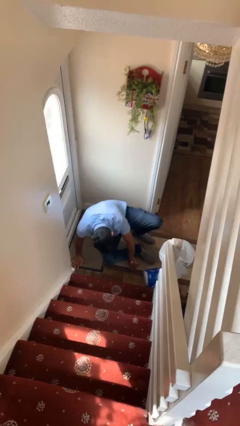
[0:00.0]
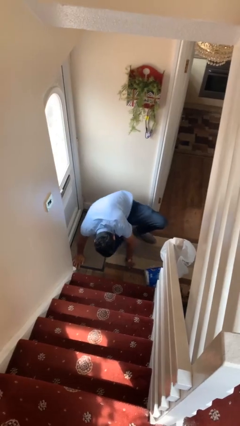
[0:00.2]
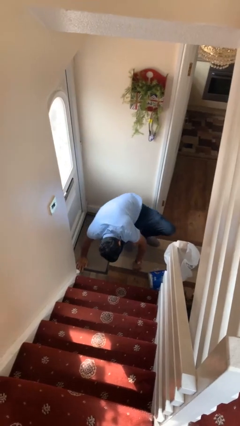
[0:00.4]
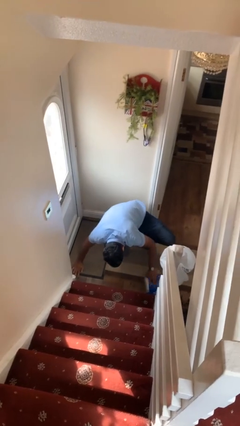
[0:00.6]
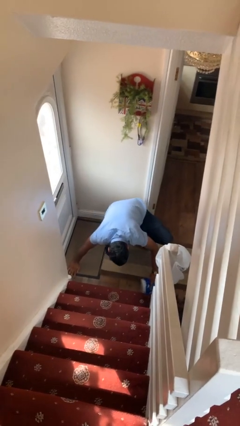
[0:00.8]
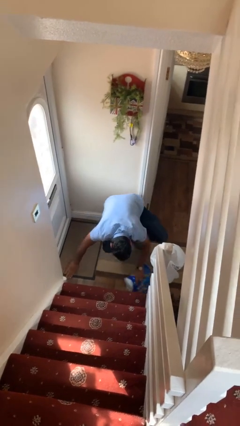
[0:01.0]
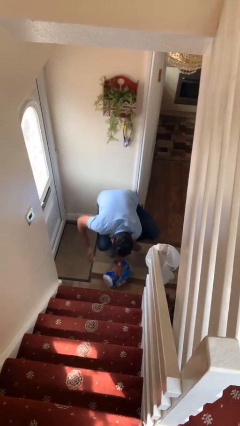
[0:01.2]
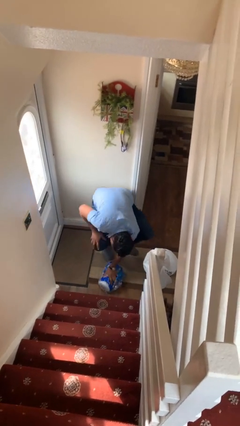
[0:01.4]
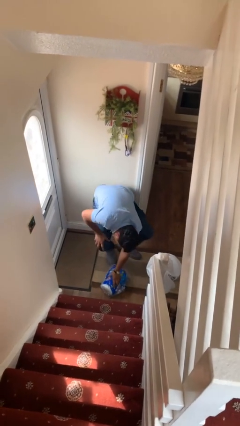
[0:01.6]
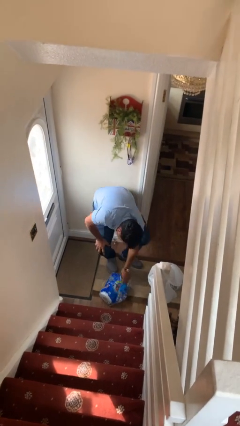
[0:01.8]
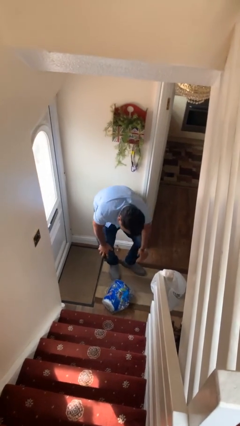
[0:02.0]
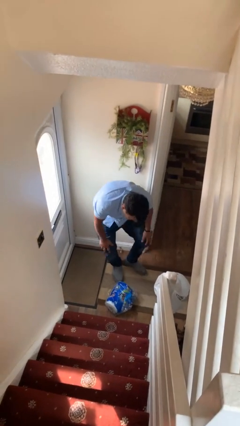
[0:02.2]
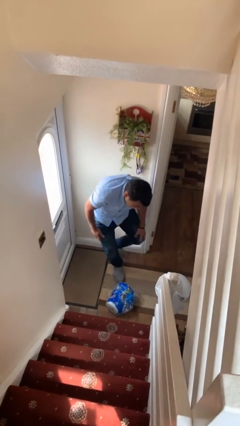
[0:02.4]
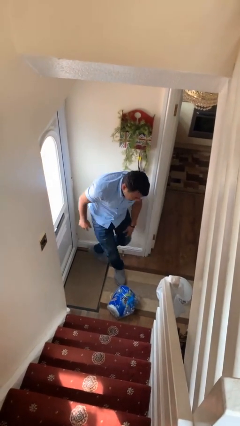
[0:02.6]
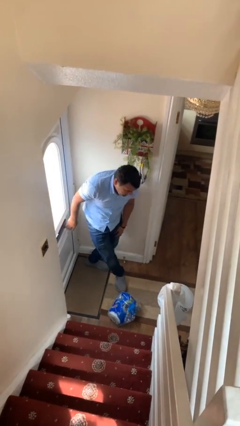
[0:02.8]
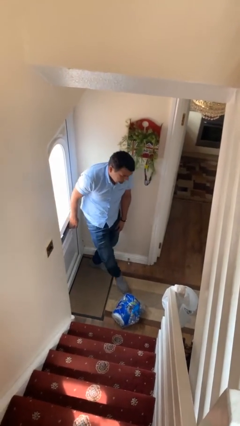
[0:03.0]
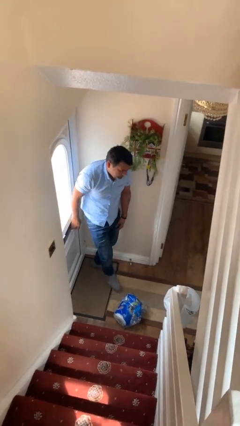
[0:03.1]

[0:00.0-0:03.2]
person stands up from floor

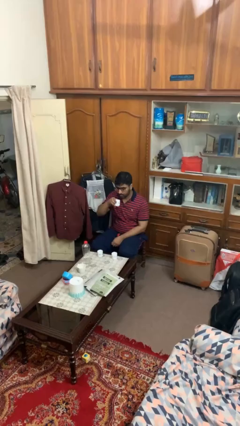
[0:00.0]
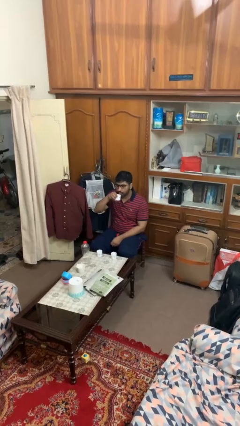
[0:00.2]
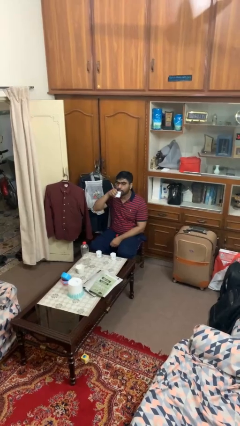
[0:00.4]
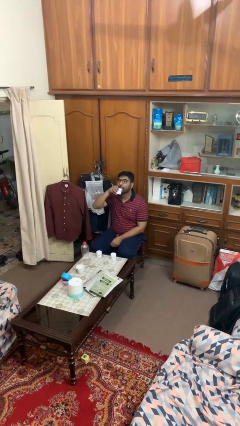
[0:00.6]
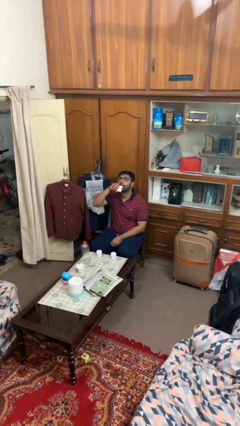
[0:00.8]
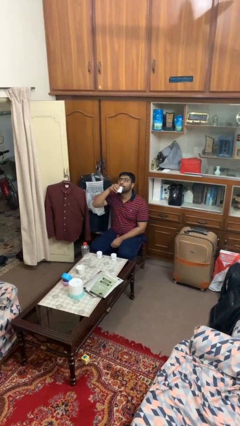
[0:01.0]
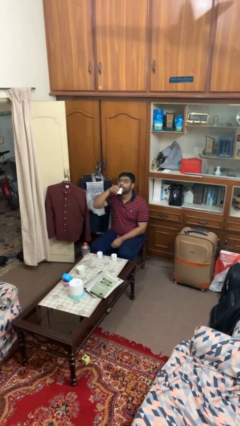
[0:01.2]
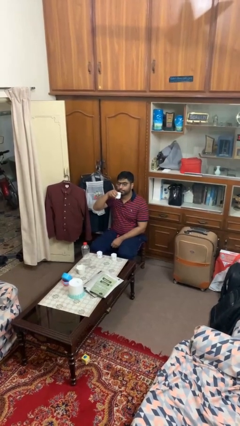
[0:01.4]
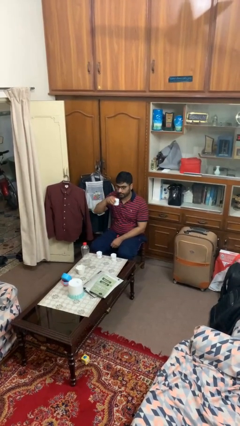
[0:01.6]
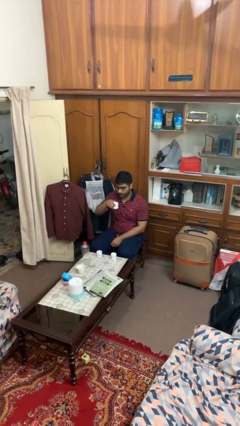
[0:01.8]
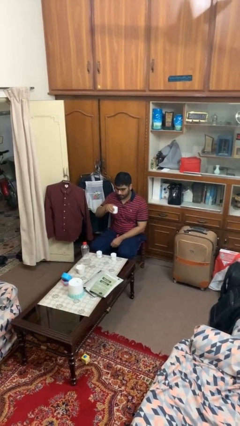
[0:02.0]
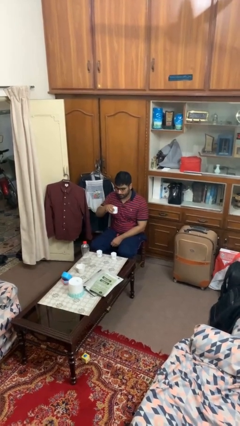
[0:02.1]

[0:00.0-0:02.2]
person drinks from shotglass

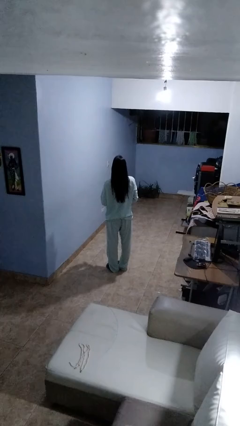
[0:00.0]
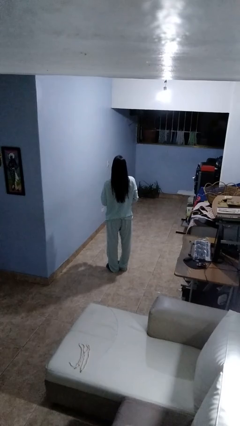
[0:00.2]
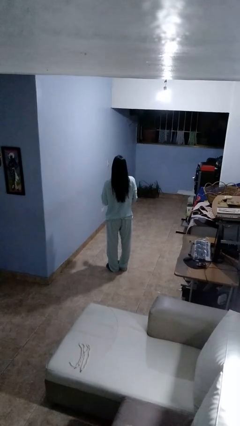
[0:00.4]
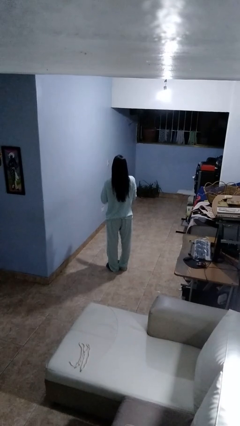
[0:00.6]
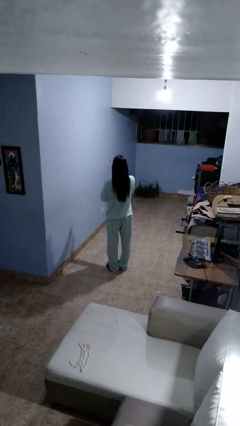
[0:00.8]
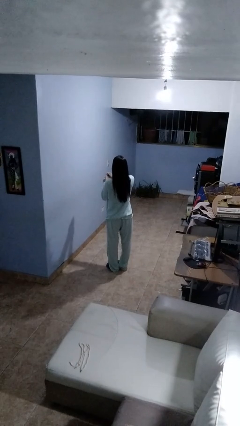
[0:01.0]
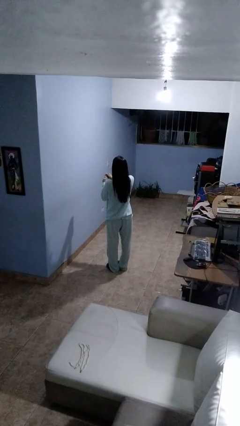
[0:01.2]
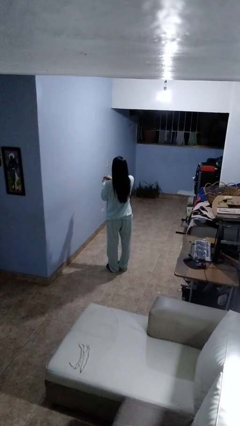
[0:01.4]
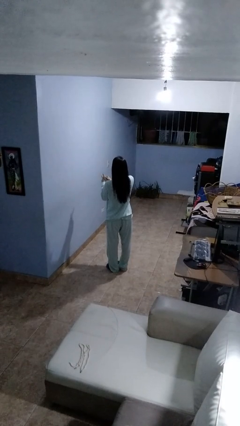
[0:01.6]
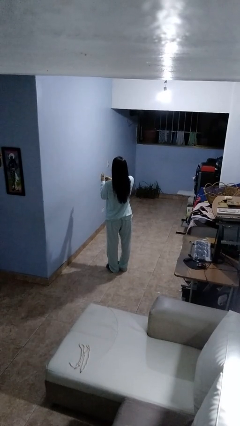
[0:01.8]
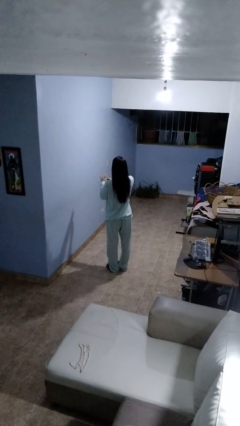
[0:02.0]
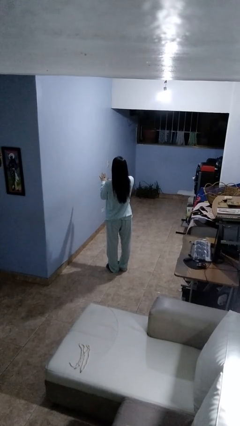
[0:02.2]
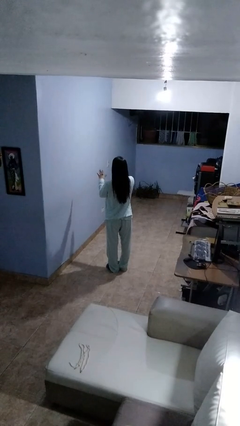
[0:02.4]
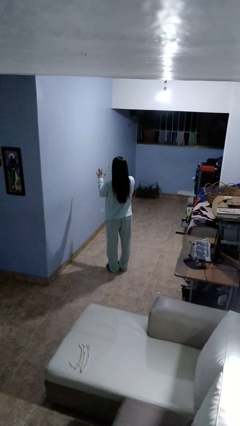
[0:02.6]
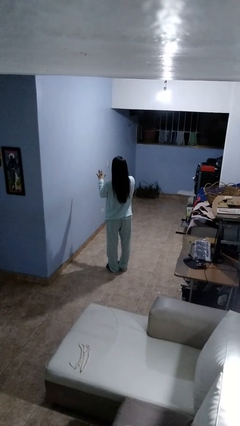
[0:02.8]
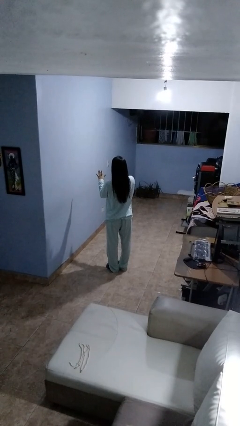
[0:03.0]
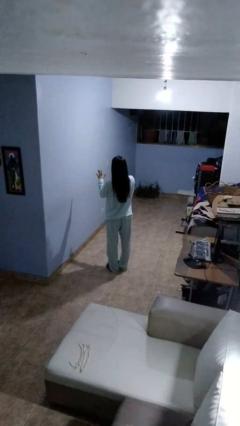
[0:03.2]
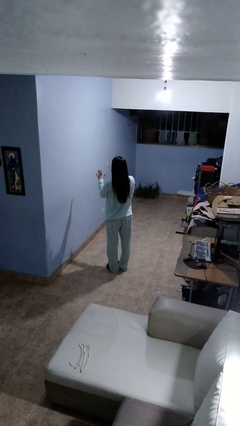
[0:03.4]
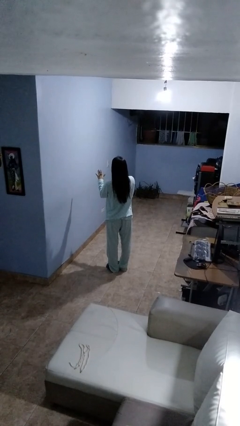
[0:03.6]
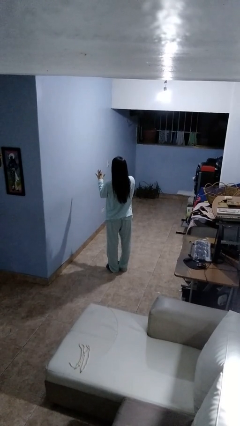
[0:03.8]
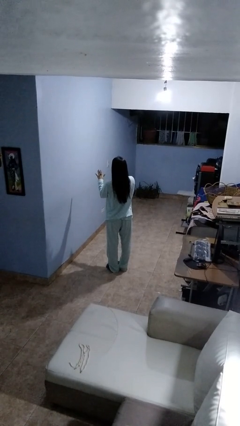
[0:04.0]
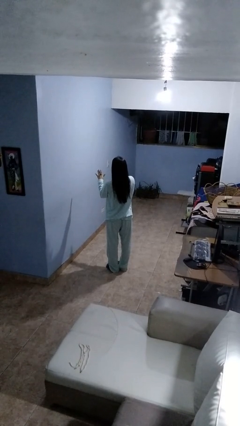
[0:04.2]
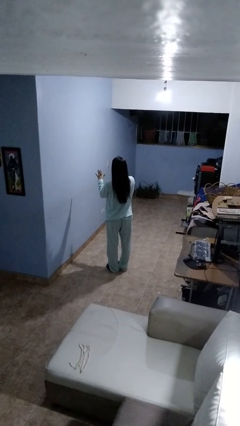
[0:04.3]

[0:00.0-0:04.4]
person puts on ring

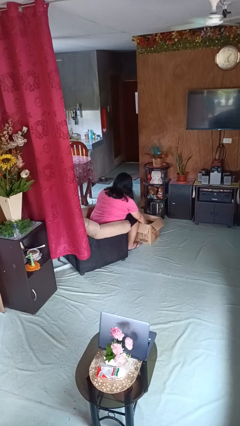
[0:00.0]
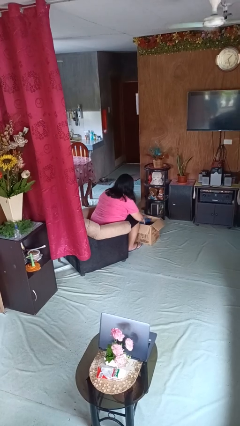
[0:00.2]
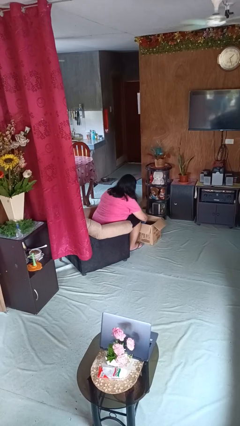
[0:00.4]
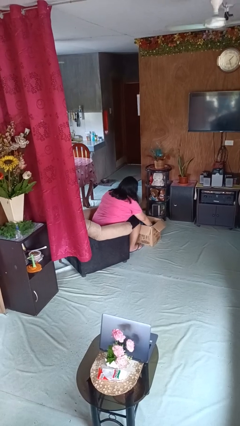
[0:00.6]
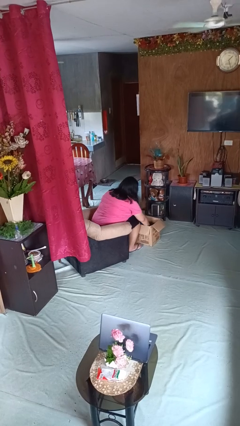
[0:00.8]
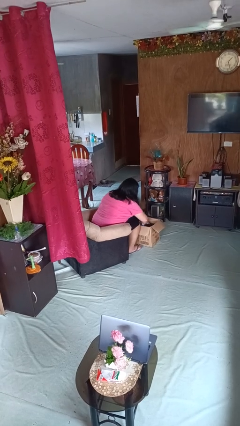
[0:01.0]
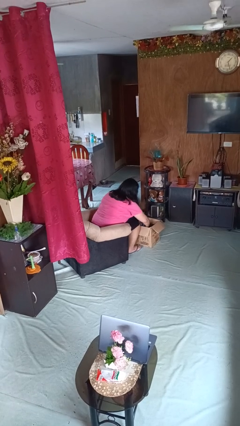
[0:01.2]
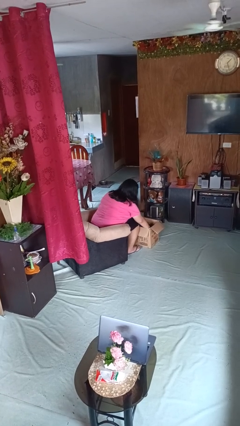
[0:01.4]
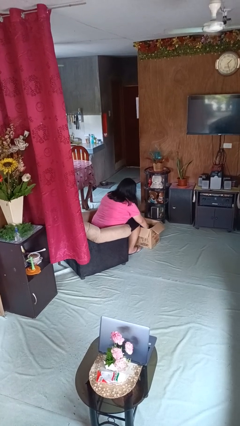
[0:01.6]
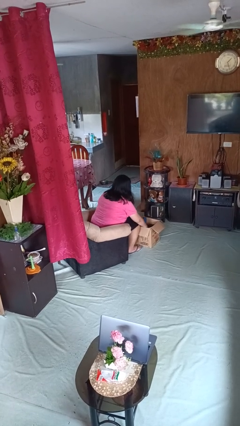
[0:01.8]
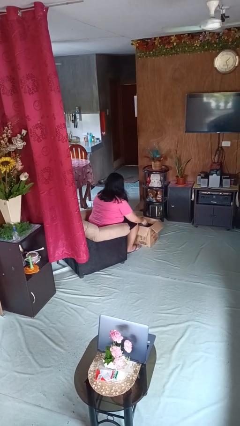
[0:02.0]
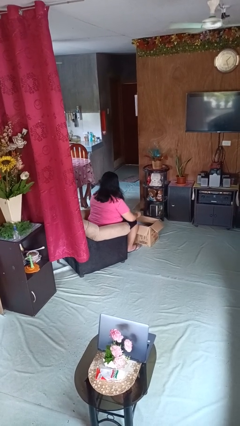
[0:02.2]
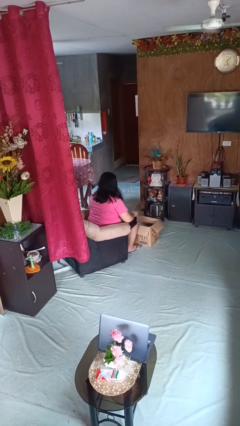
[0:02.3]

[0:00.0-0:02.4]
person searches in box

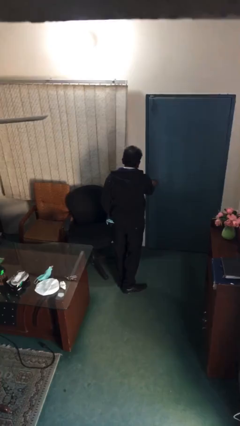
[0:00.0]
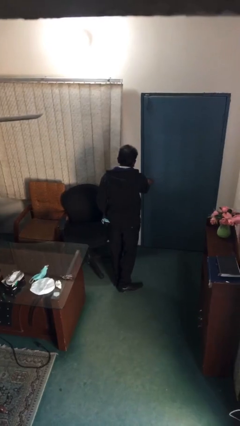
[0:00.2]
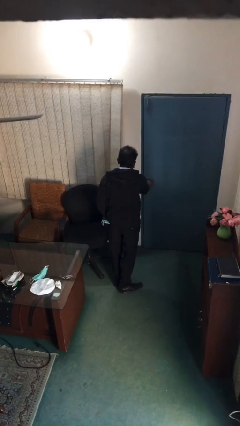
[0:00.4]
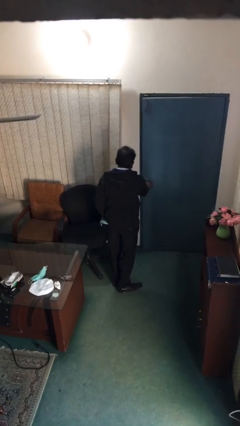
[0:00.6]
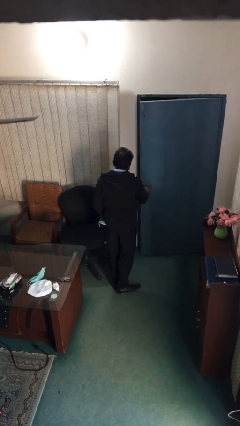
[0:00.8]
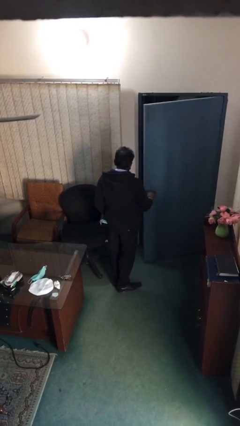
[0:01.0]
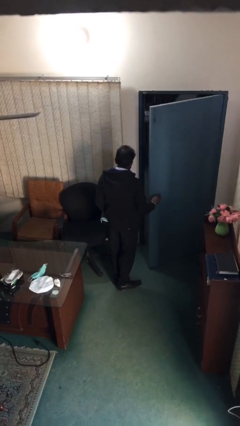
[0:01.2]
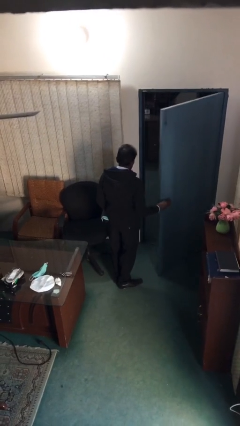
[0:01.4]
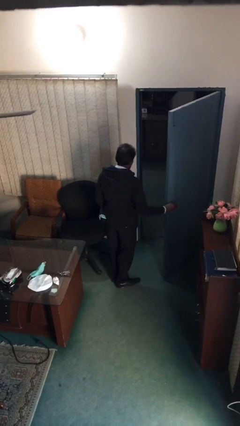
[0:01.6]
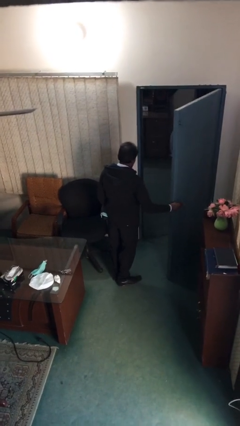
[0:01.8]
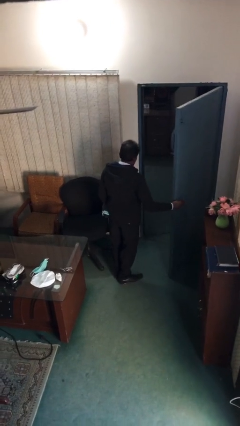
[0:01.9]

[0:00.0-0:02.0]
person opens facility door

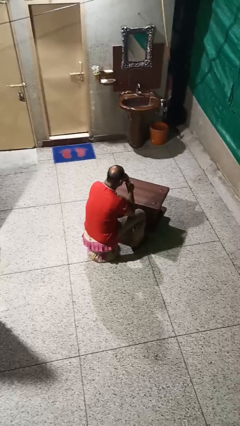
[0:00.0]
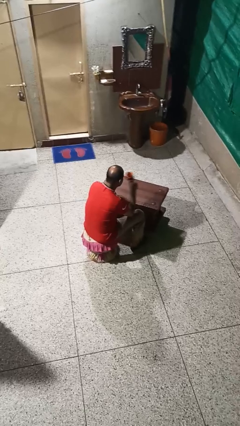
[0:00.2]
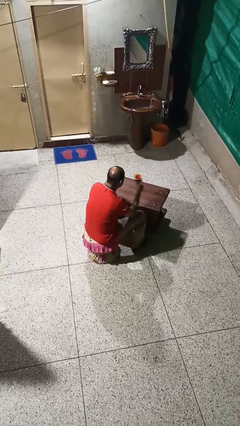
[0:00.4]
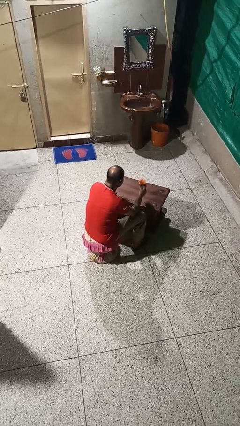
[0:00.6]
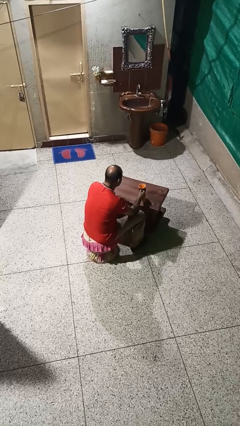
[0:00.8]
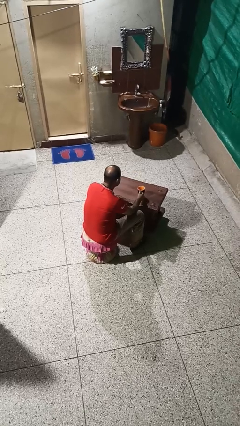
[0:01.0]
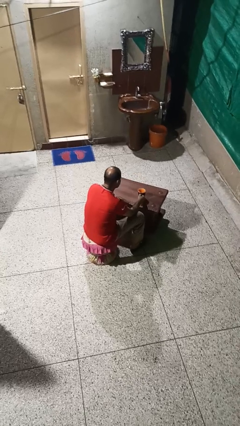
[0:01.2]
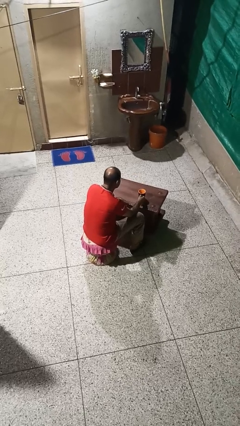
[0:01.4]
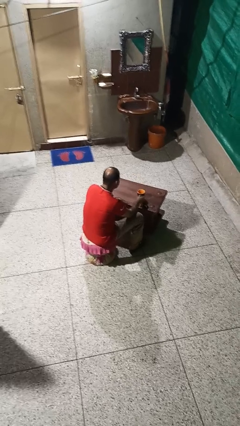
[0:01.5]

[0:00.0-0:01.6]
person puts down object on table

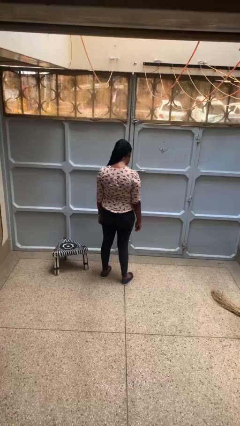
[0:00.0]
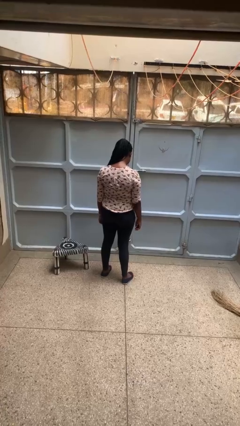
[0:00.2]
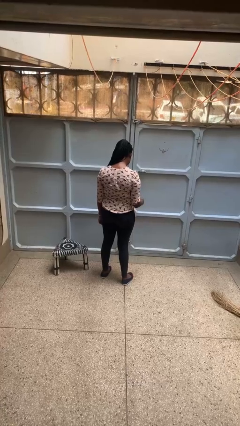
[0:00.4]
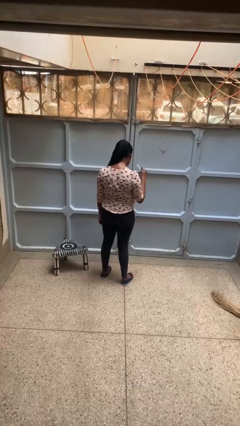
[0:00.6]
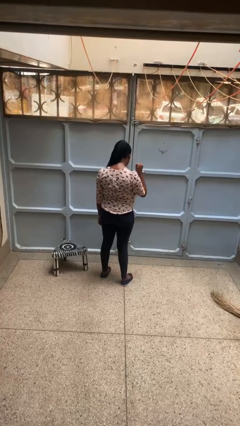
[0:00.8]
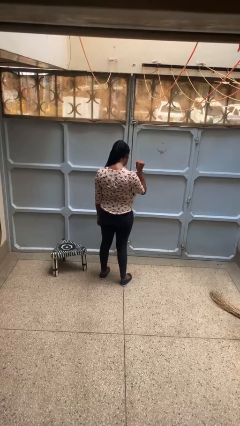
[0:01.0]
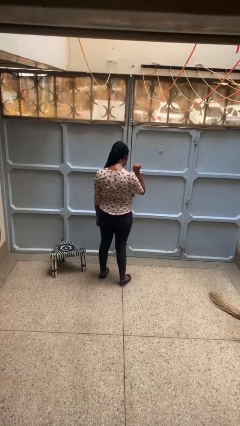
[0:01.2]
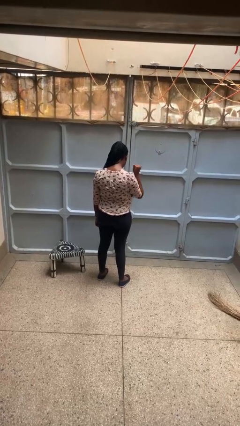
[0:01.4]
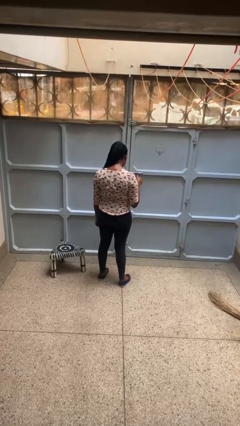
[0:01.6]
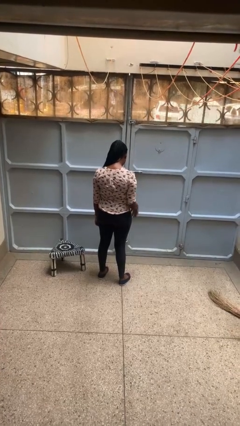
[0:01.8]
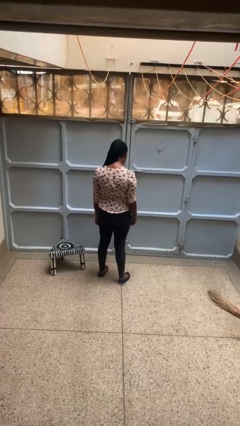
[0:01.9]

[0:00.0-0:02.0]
person gestures behind me
